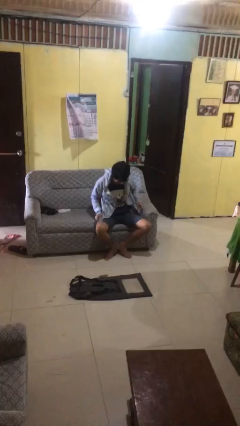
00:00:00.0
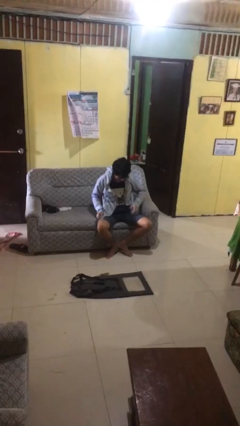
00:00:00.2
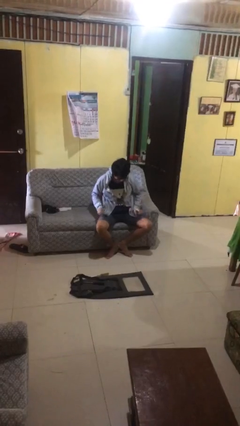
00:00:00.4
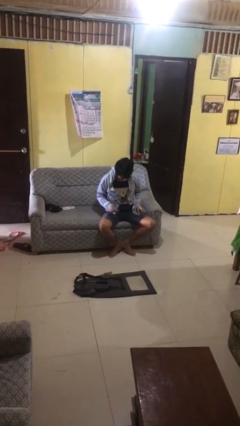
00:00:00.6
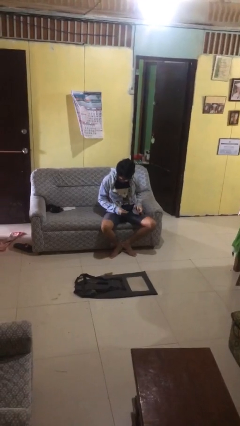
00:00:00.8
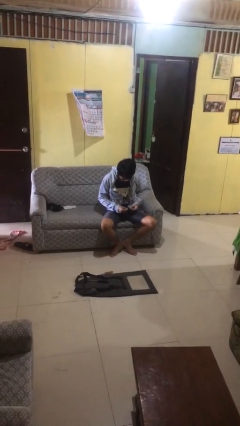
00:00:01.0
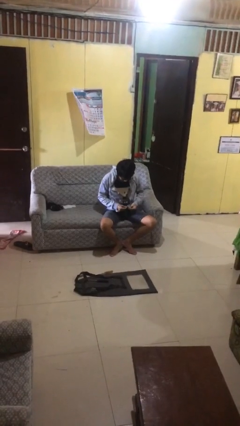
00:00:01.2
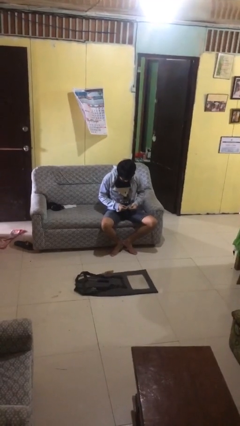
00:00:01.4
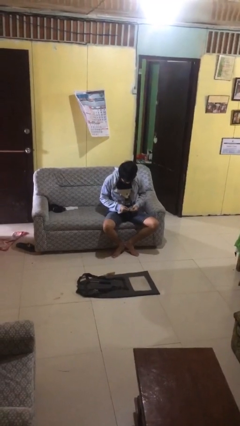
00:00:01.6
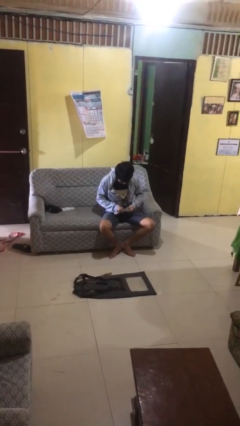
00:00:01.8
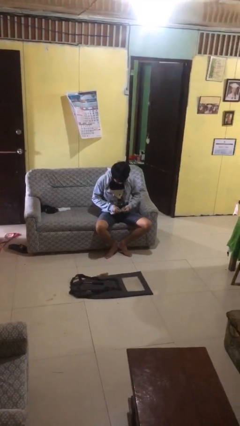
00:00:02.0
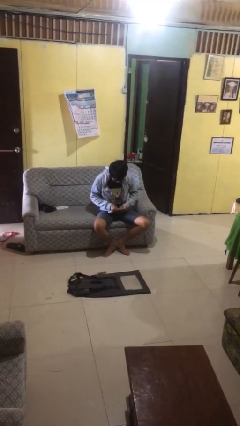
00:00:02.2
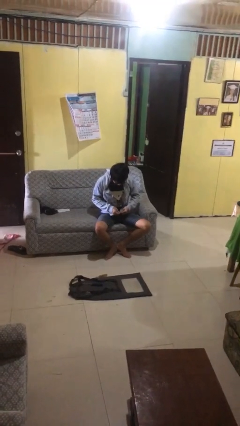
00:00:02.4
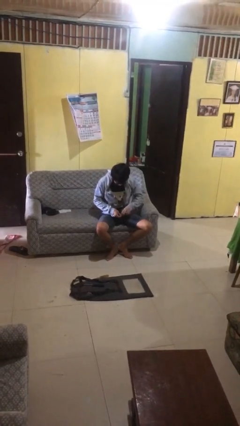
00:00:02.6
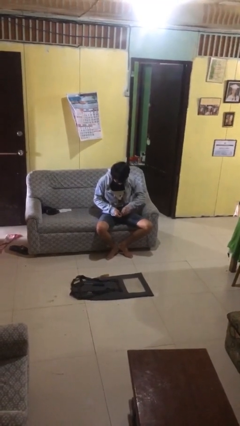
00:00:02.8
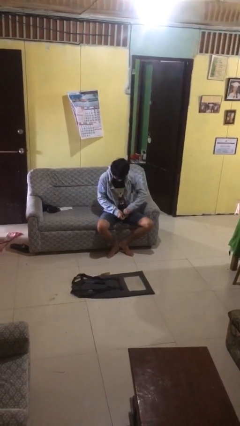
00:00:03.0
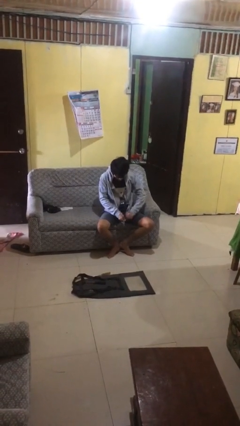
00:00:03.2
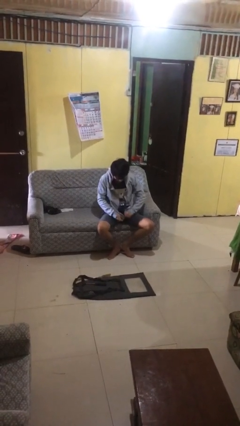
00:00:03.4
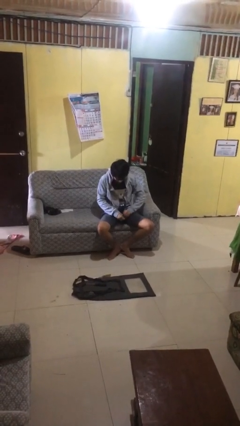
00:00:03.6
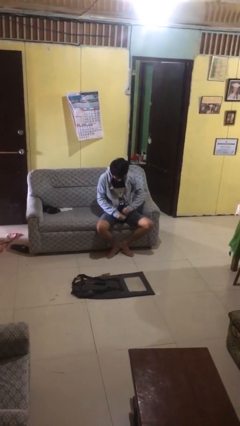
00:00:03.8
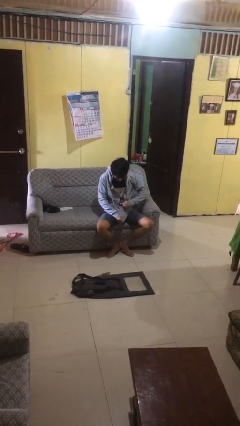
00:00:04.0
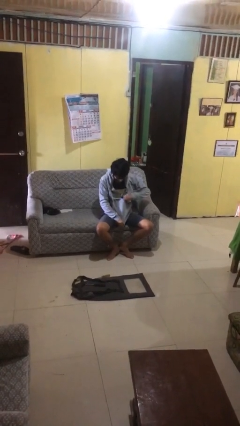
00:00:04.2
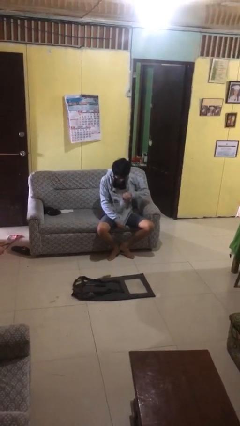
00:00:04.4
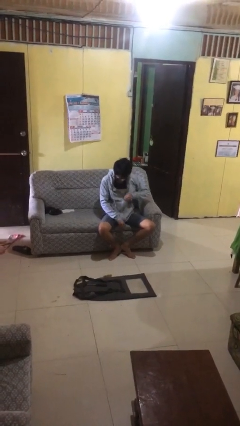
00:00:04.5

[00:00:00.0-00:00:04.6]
person zips up jacket

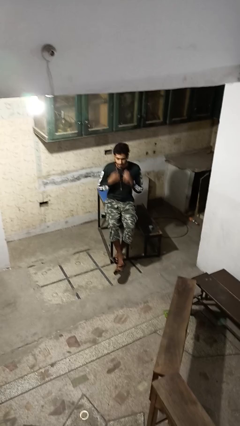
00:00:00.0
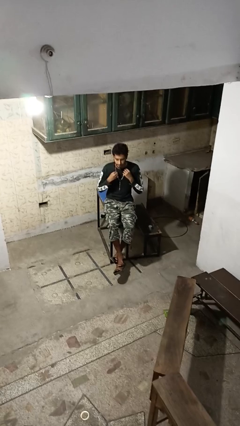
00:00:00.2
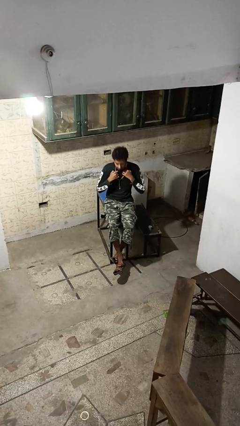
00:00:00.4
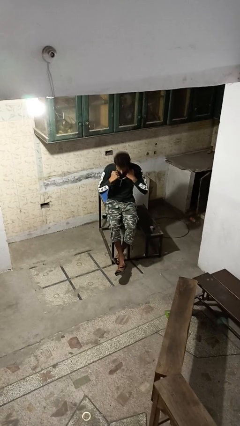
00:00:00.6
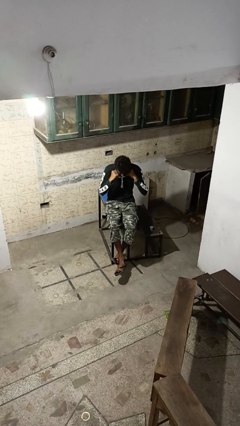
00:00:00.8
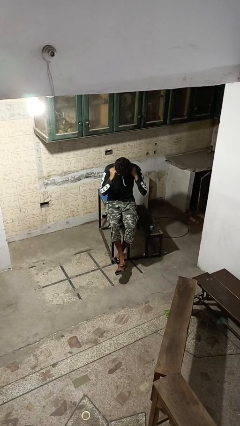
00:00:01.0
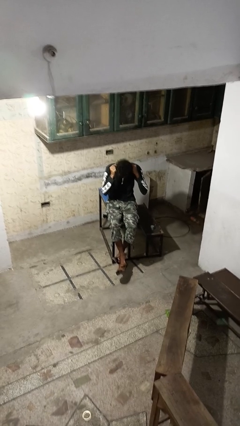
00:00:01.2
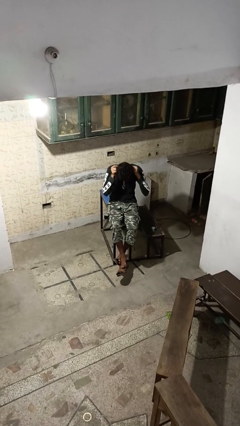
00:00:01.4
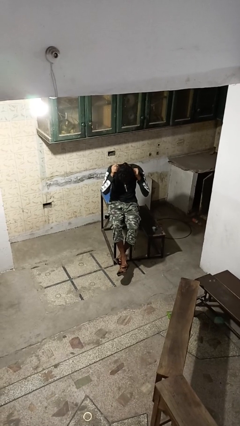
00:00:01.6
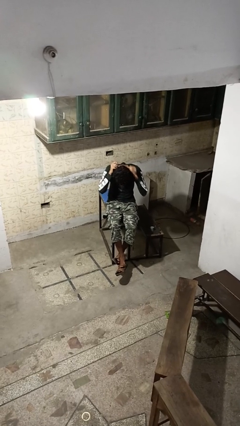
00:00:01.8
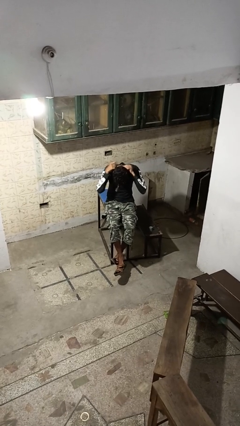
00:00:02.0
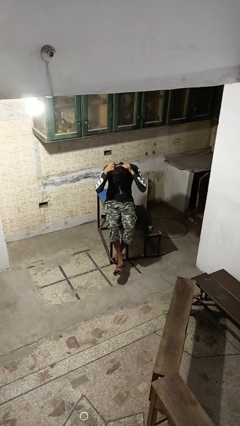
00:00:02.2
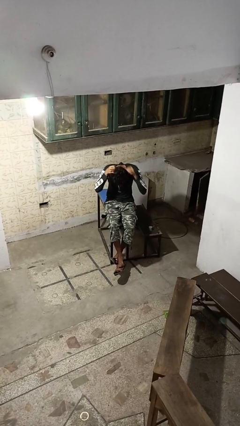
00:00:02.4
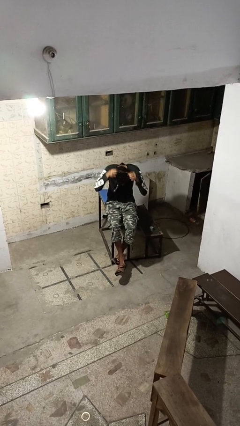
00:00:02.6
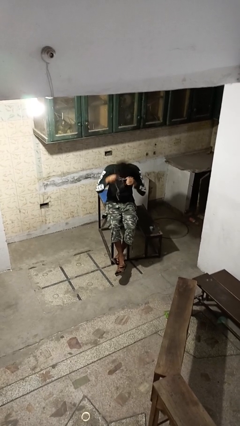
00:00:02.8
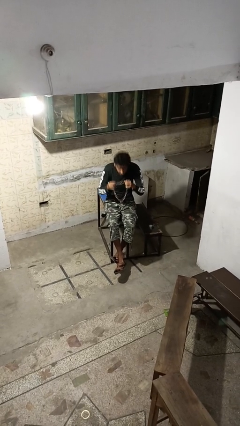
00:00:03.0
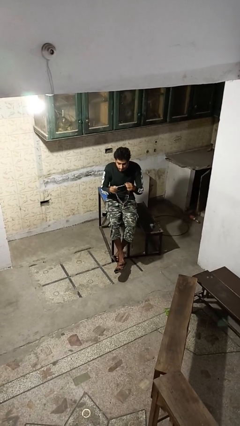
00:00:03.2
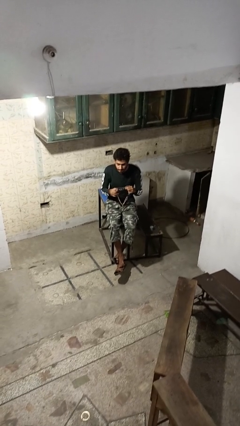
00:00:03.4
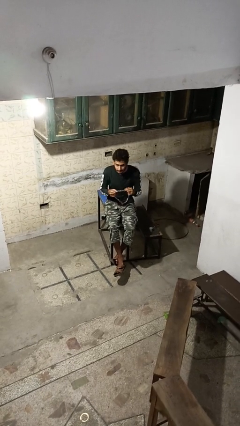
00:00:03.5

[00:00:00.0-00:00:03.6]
person takes off necklace

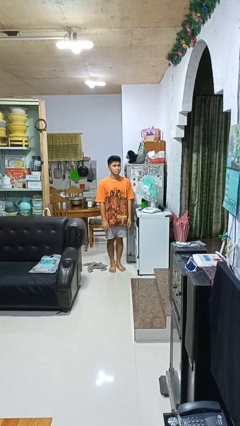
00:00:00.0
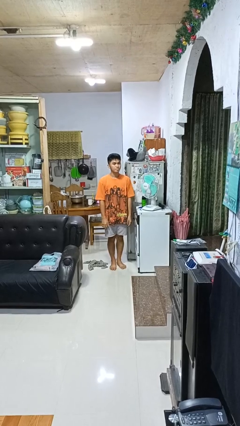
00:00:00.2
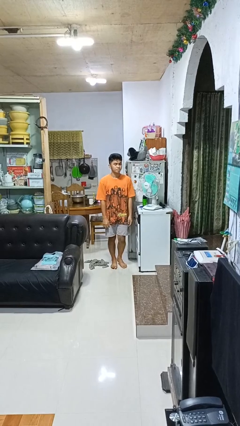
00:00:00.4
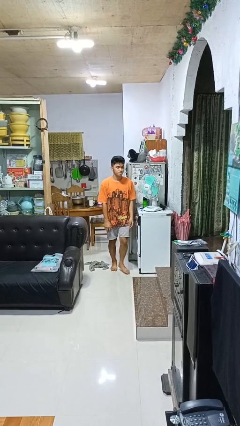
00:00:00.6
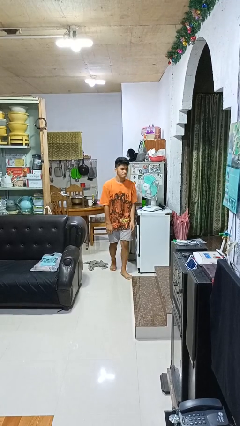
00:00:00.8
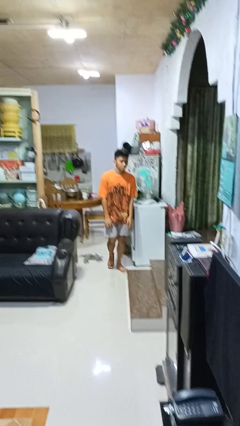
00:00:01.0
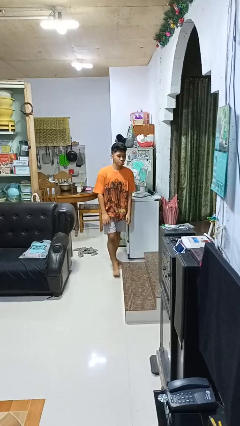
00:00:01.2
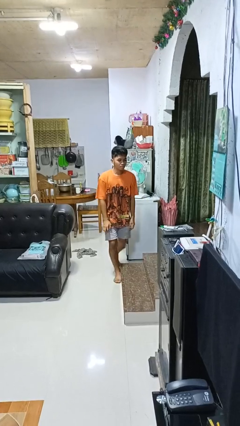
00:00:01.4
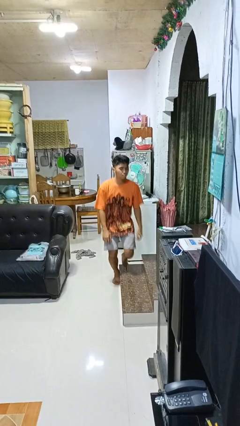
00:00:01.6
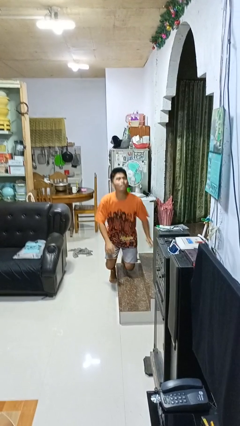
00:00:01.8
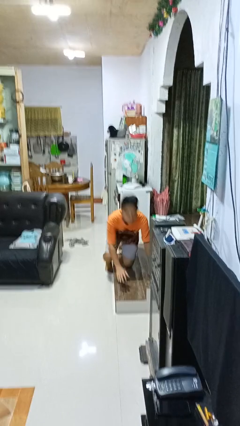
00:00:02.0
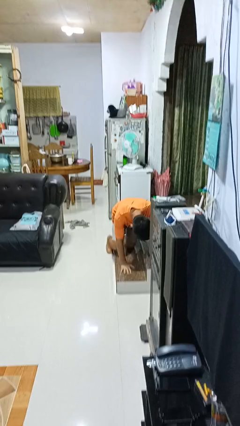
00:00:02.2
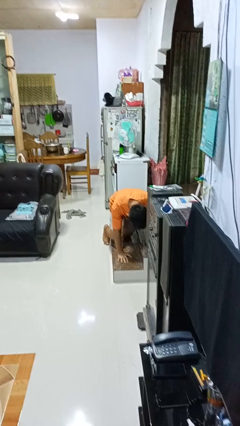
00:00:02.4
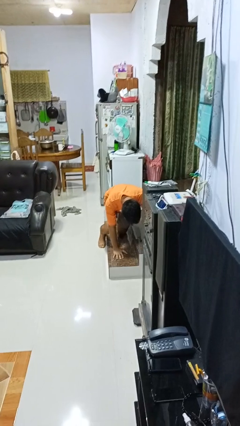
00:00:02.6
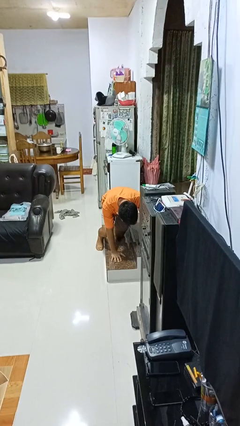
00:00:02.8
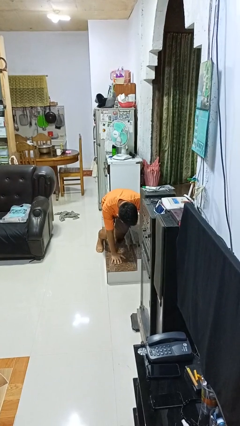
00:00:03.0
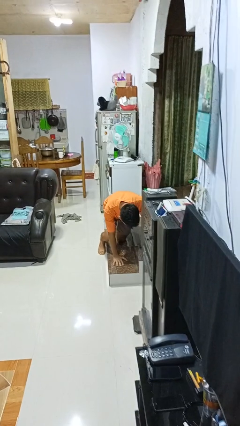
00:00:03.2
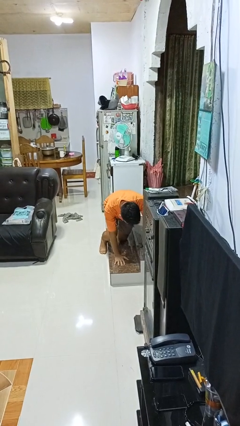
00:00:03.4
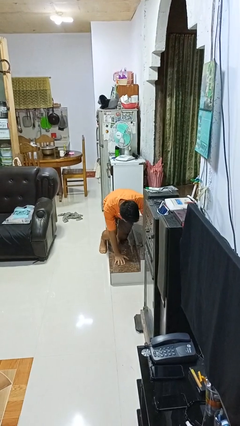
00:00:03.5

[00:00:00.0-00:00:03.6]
person trips on object on floor

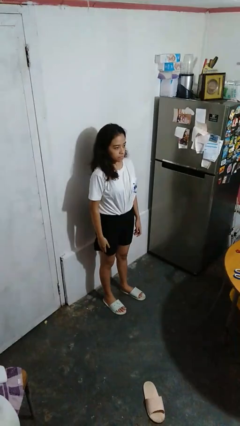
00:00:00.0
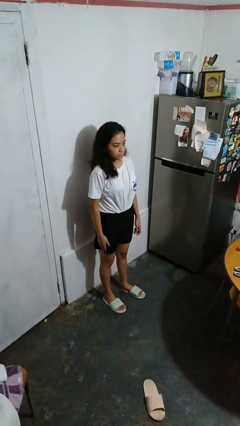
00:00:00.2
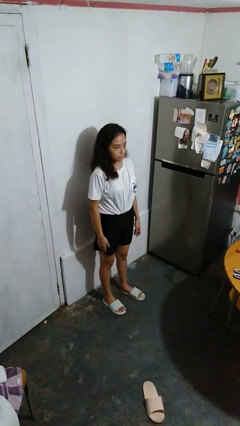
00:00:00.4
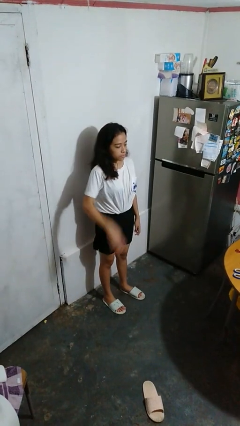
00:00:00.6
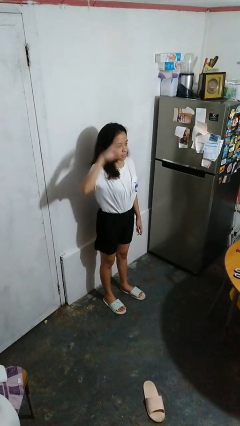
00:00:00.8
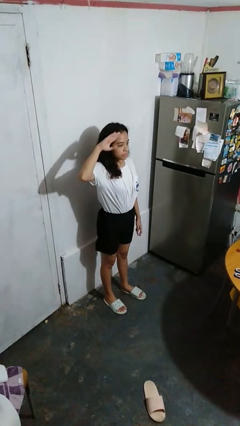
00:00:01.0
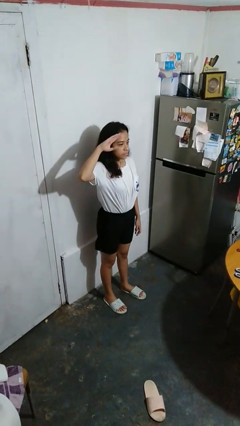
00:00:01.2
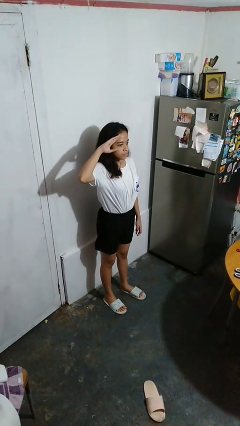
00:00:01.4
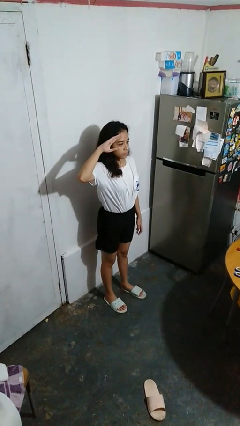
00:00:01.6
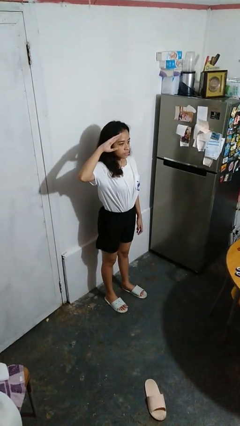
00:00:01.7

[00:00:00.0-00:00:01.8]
person salutes

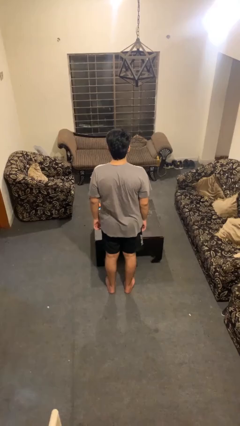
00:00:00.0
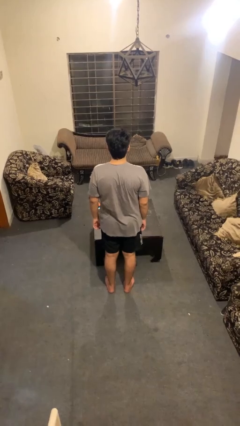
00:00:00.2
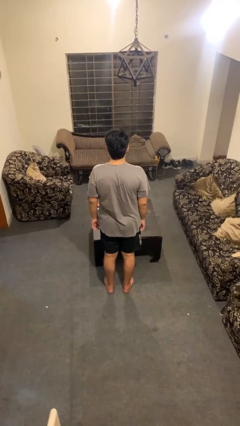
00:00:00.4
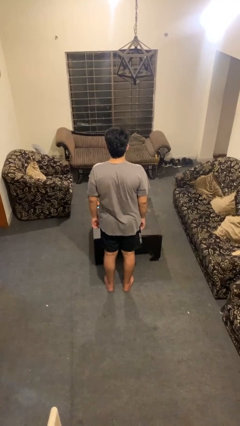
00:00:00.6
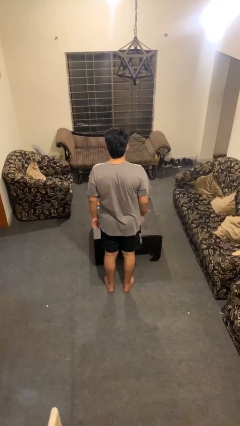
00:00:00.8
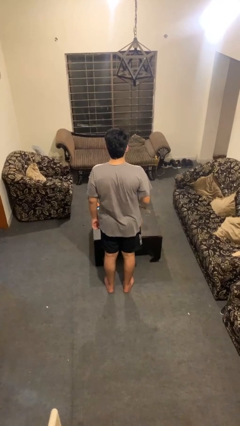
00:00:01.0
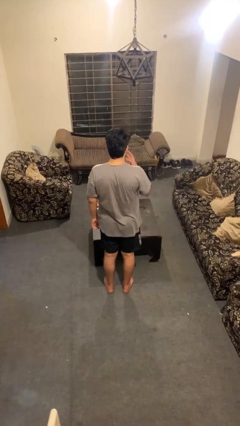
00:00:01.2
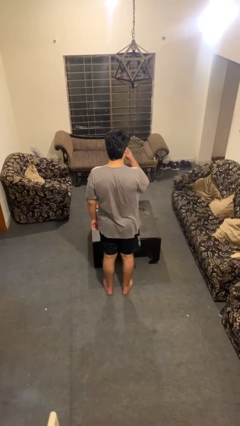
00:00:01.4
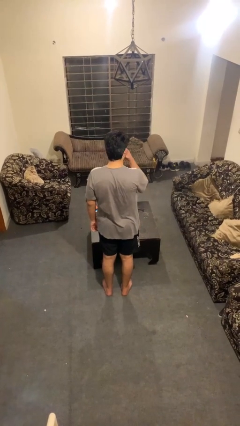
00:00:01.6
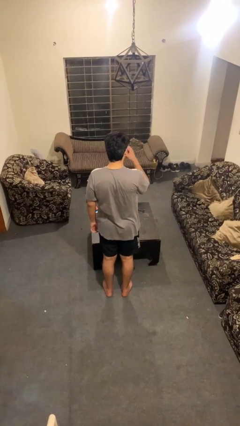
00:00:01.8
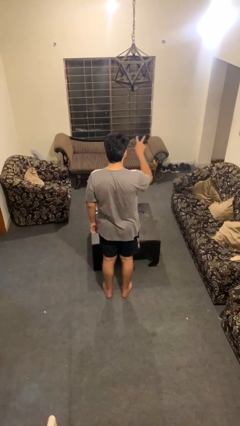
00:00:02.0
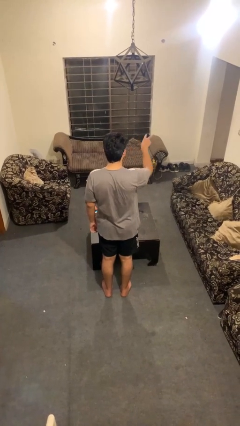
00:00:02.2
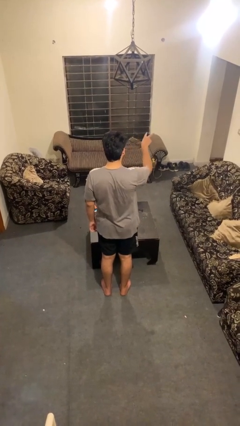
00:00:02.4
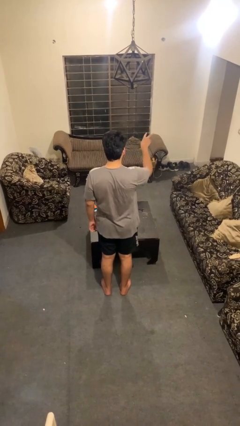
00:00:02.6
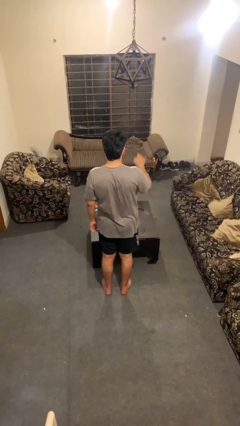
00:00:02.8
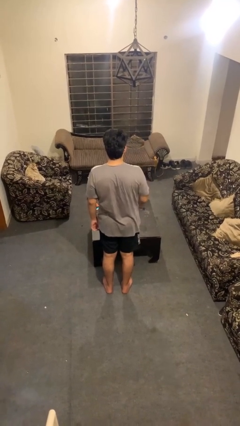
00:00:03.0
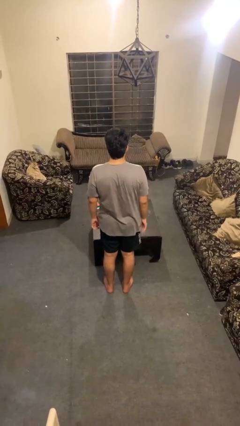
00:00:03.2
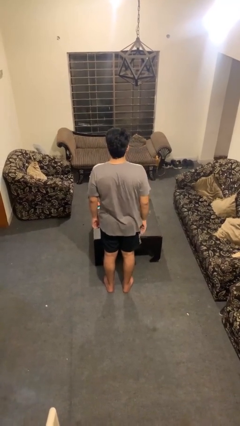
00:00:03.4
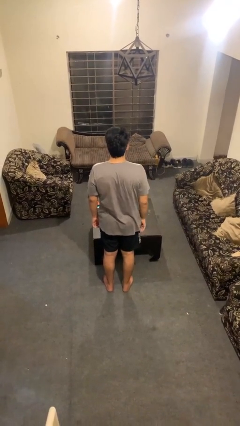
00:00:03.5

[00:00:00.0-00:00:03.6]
person gestures watch closely

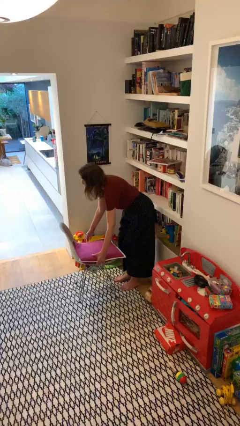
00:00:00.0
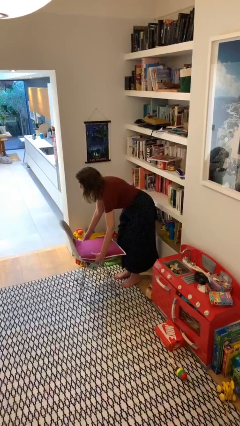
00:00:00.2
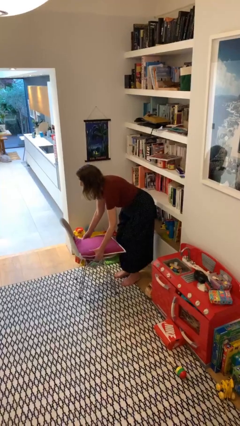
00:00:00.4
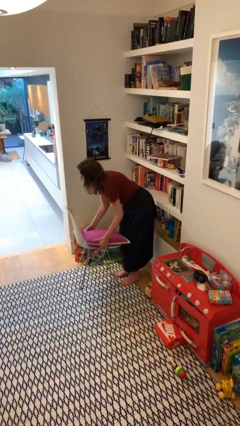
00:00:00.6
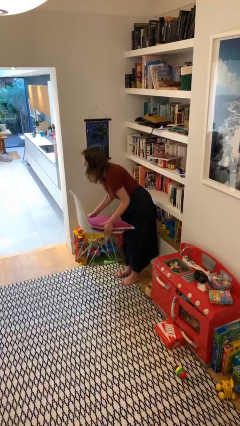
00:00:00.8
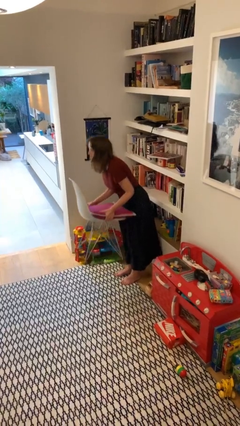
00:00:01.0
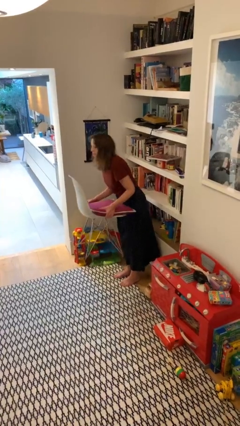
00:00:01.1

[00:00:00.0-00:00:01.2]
person picks up object from floor
